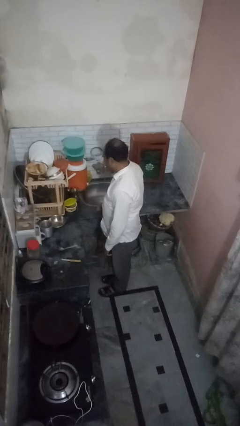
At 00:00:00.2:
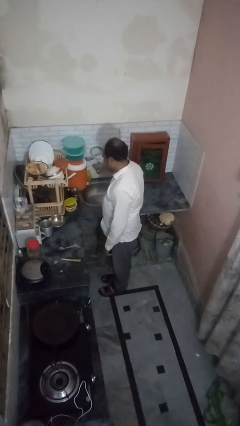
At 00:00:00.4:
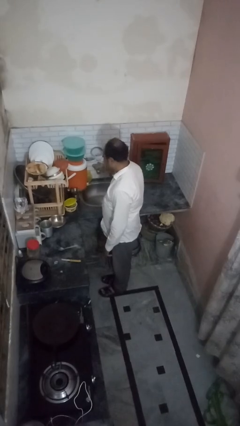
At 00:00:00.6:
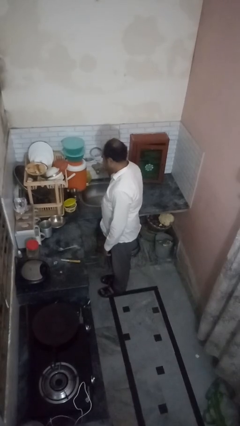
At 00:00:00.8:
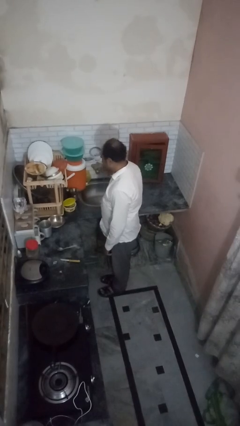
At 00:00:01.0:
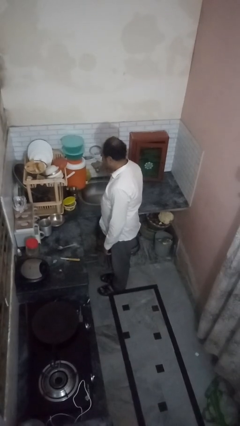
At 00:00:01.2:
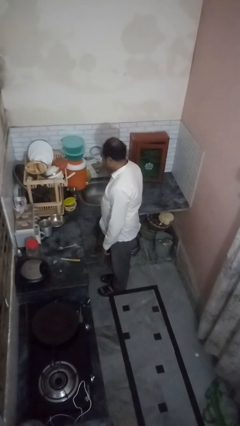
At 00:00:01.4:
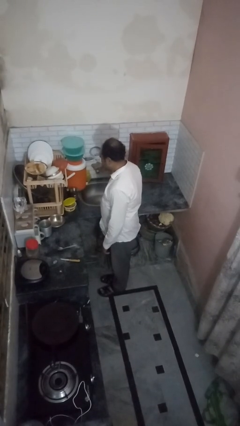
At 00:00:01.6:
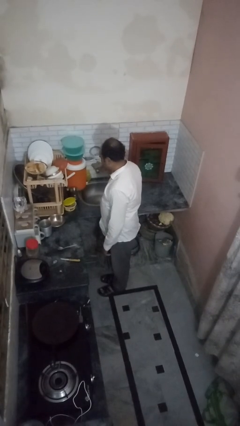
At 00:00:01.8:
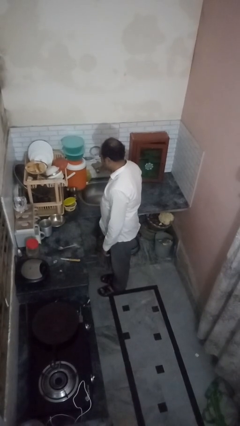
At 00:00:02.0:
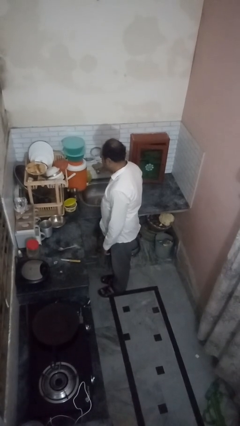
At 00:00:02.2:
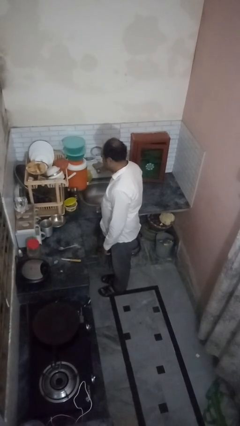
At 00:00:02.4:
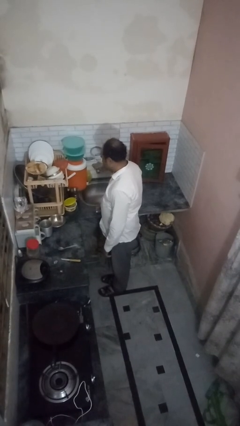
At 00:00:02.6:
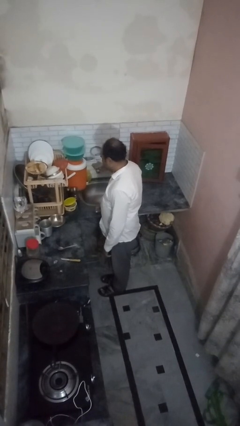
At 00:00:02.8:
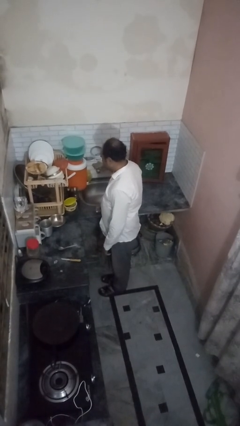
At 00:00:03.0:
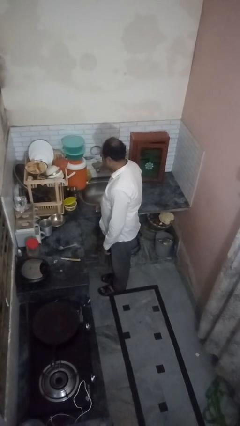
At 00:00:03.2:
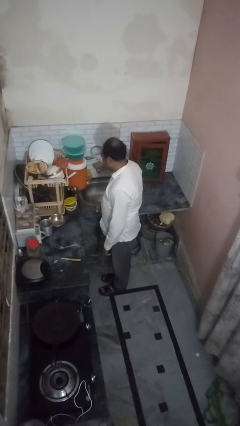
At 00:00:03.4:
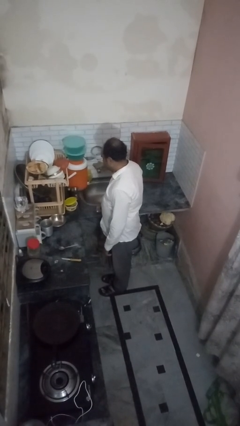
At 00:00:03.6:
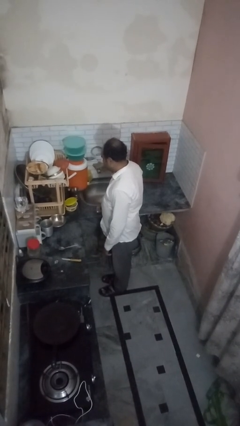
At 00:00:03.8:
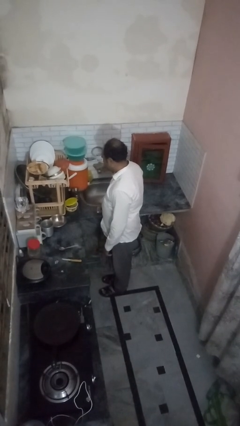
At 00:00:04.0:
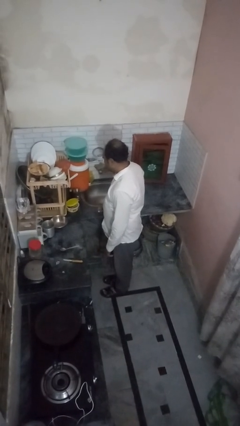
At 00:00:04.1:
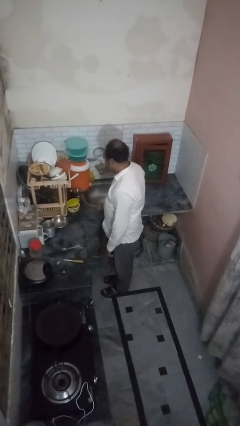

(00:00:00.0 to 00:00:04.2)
person turns off faucet

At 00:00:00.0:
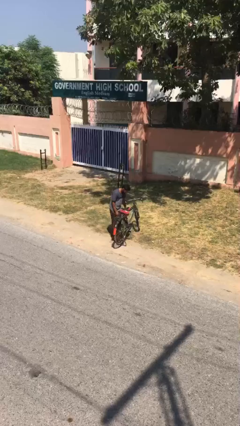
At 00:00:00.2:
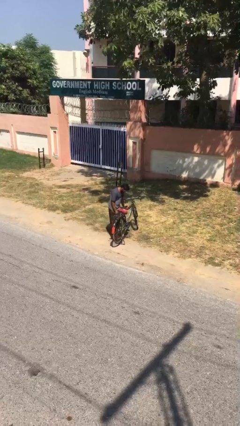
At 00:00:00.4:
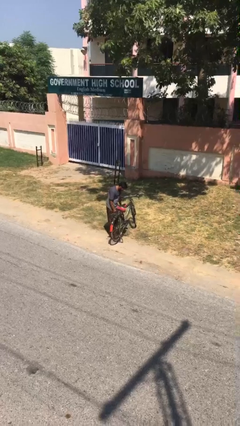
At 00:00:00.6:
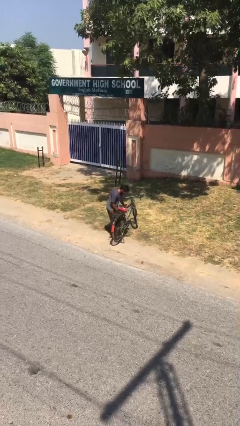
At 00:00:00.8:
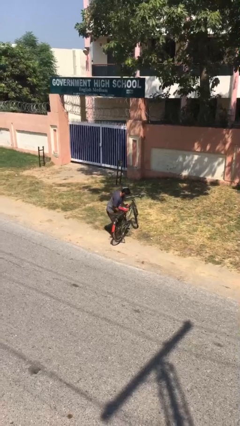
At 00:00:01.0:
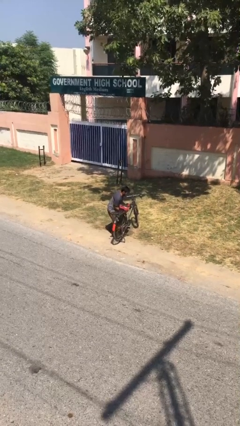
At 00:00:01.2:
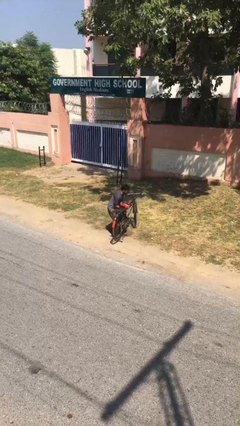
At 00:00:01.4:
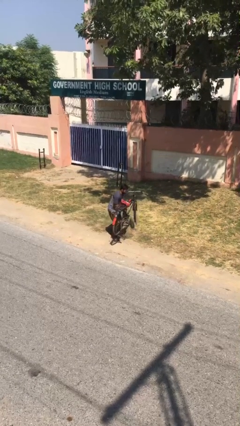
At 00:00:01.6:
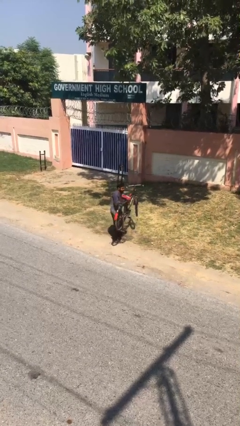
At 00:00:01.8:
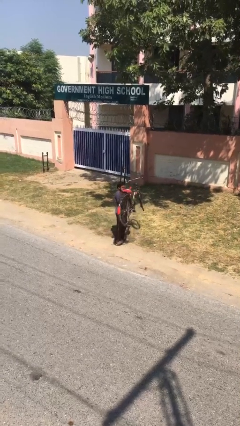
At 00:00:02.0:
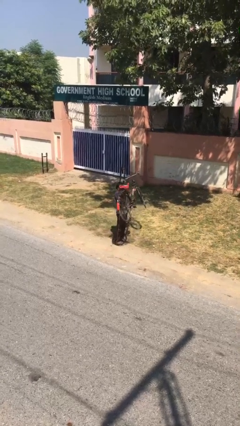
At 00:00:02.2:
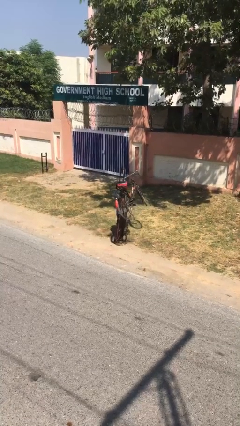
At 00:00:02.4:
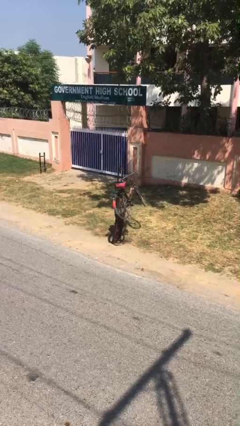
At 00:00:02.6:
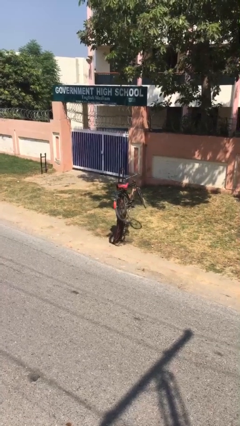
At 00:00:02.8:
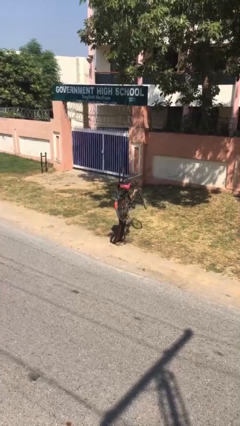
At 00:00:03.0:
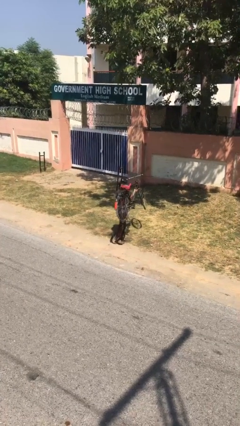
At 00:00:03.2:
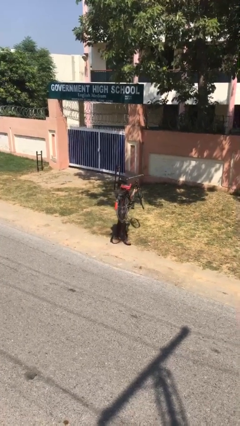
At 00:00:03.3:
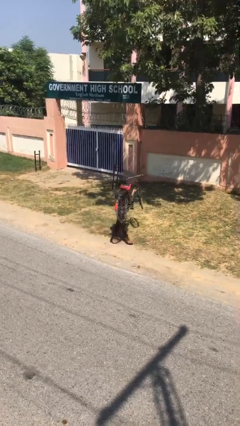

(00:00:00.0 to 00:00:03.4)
person picks up object from floor

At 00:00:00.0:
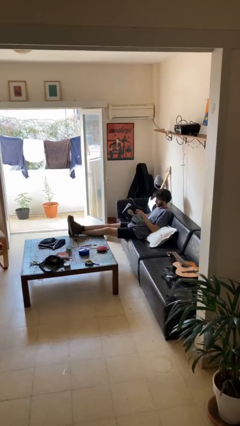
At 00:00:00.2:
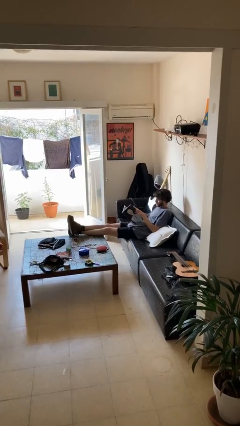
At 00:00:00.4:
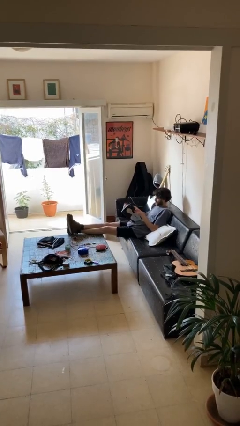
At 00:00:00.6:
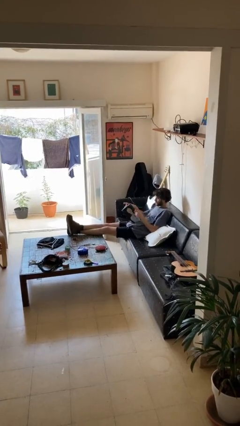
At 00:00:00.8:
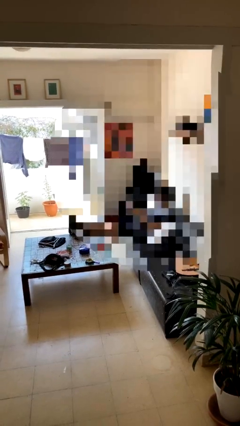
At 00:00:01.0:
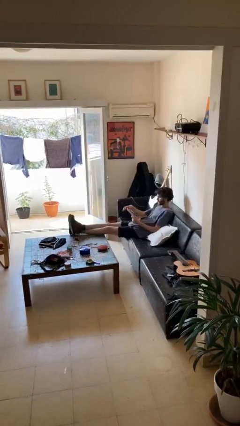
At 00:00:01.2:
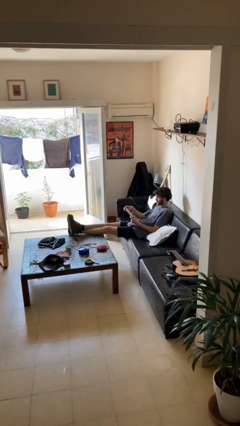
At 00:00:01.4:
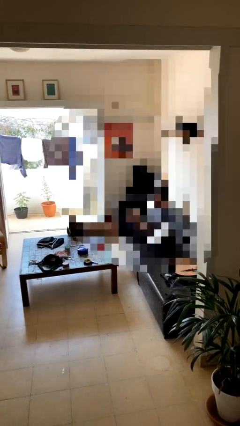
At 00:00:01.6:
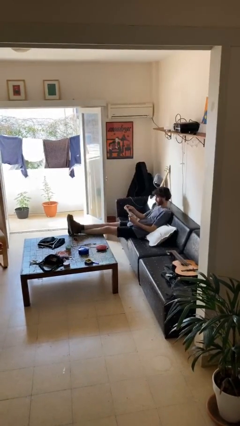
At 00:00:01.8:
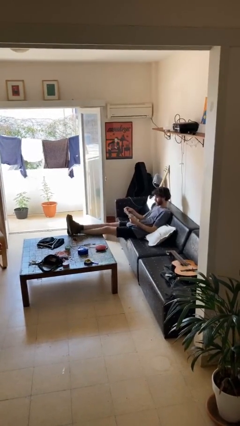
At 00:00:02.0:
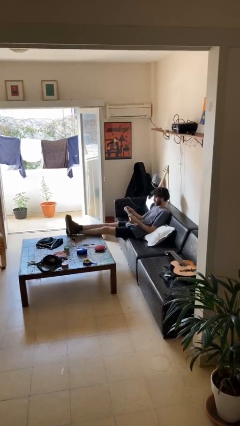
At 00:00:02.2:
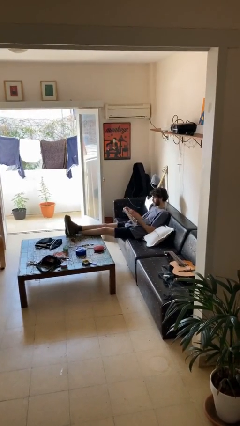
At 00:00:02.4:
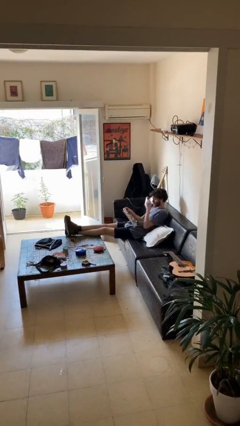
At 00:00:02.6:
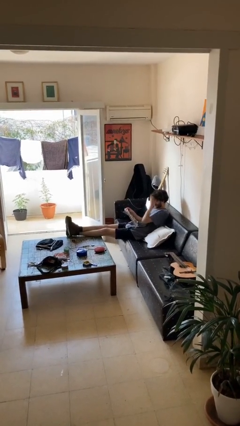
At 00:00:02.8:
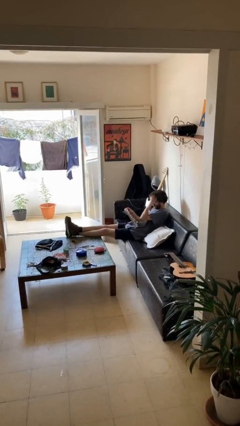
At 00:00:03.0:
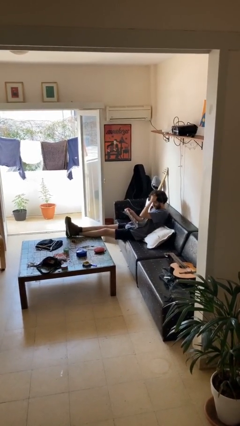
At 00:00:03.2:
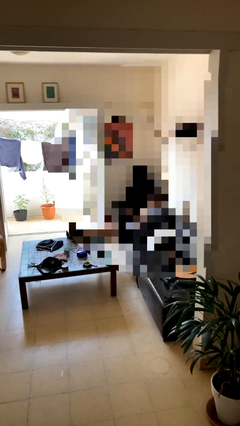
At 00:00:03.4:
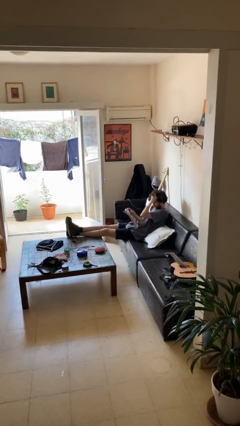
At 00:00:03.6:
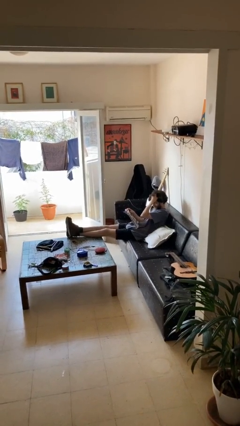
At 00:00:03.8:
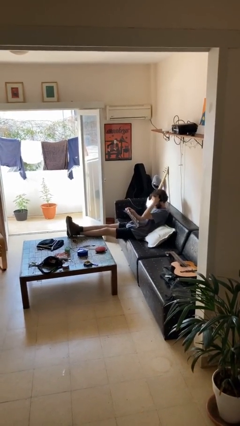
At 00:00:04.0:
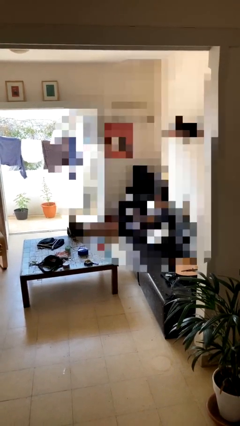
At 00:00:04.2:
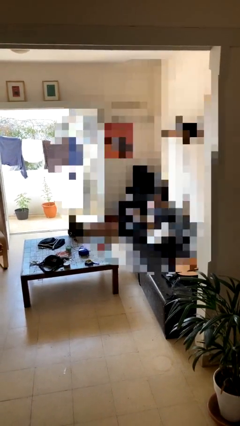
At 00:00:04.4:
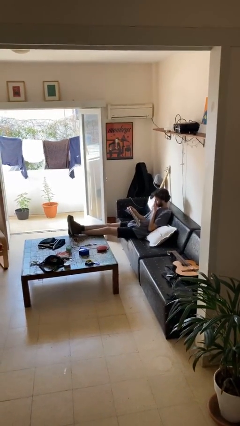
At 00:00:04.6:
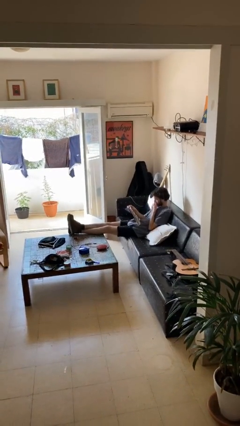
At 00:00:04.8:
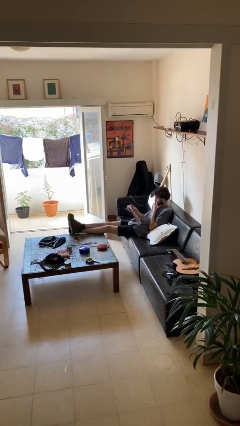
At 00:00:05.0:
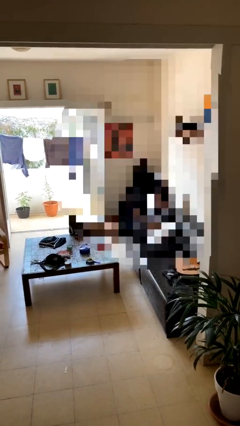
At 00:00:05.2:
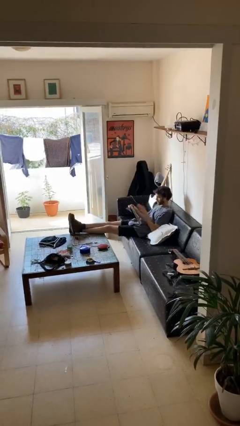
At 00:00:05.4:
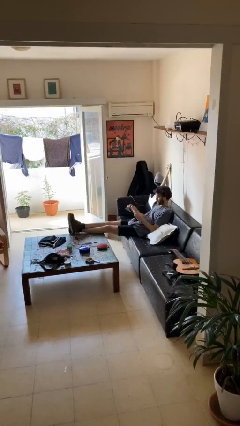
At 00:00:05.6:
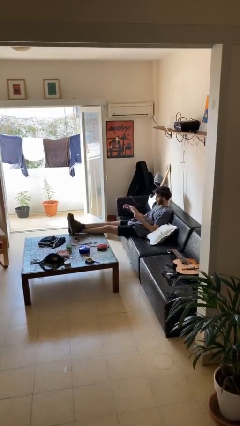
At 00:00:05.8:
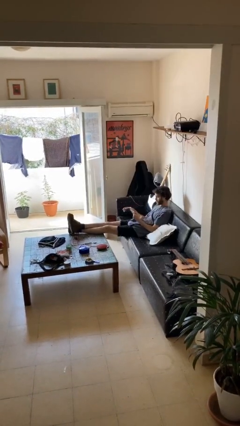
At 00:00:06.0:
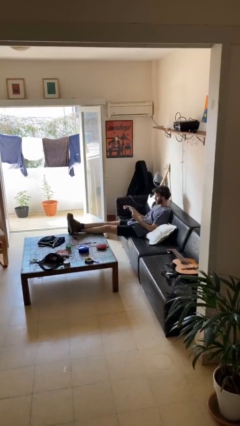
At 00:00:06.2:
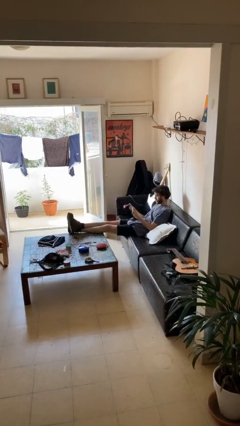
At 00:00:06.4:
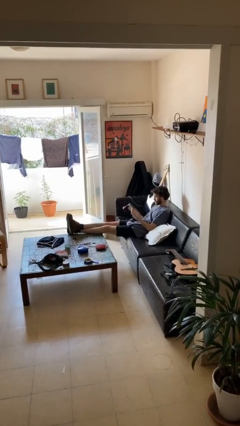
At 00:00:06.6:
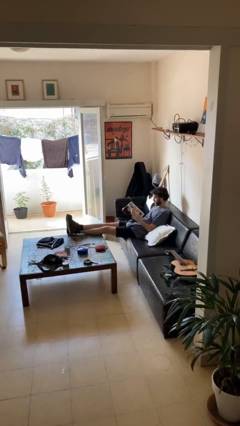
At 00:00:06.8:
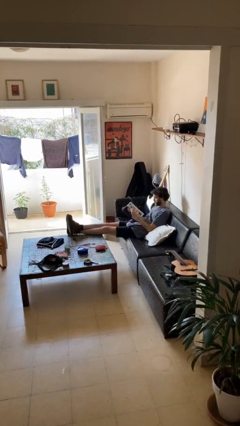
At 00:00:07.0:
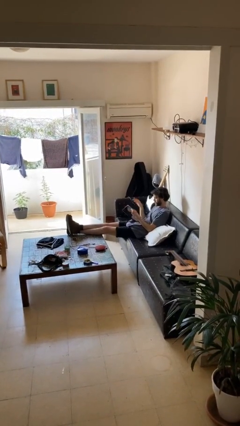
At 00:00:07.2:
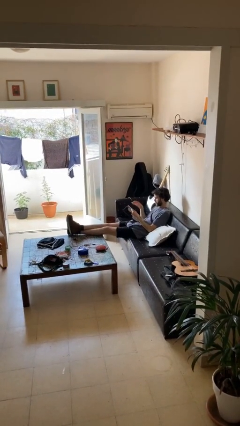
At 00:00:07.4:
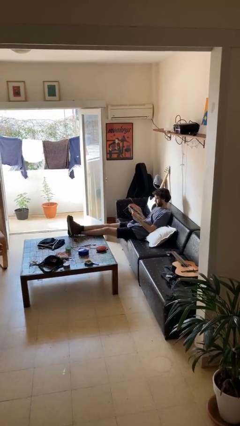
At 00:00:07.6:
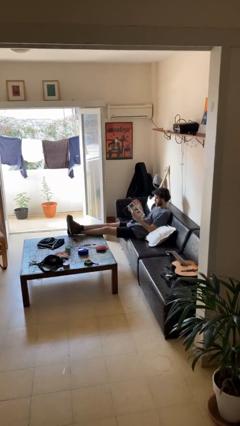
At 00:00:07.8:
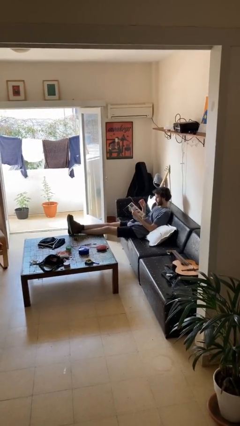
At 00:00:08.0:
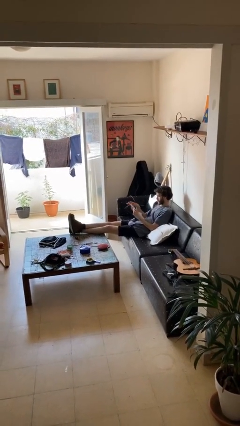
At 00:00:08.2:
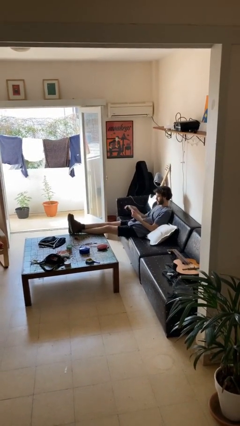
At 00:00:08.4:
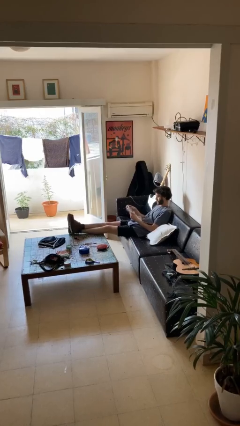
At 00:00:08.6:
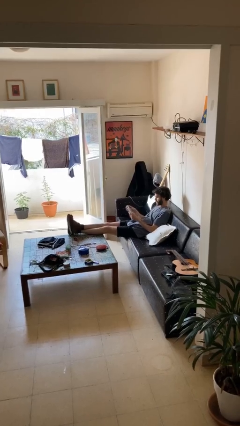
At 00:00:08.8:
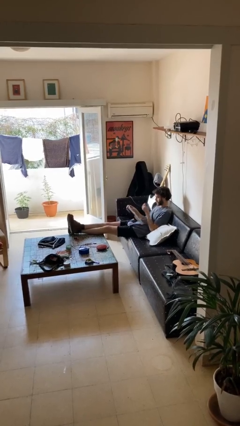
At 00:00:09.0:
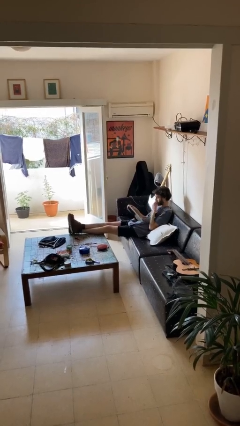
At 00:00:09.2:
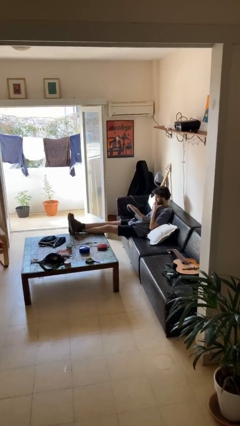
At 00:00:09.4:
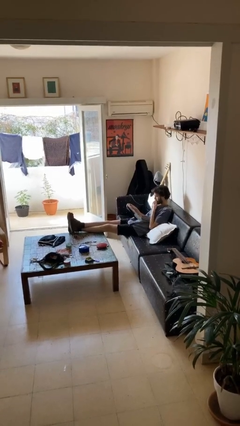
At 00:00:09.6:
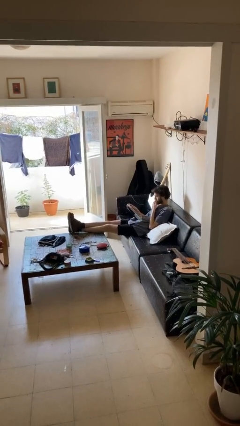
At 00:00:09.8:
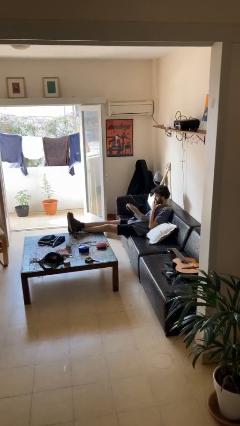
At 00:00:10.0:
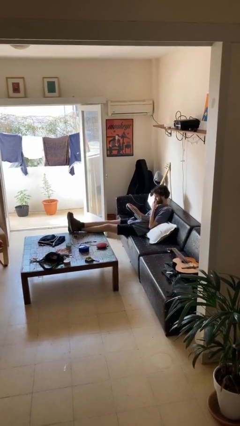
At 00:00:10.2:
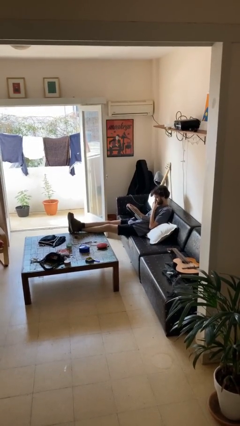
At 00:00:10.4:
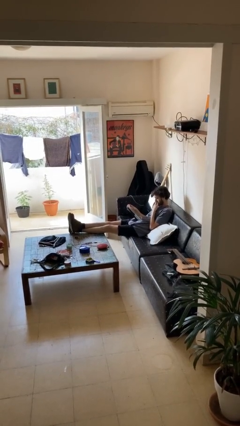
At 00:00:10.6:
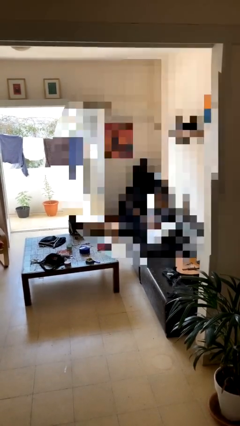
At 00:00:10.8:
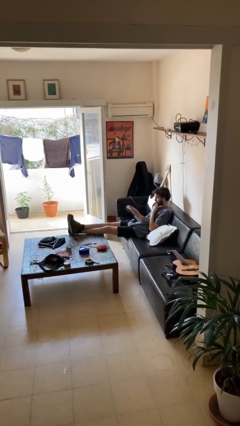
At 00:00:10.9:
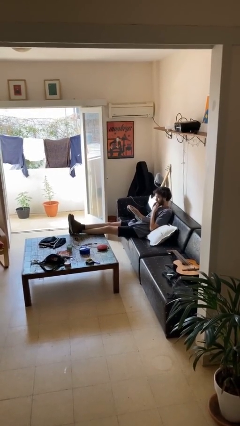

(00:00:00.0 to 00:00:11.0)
person reads document
